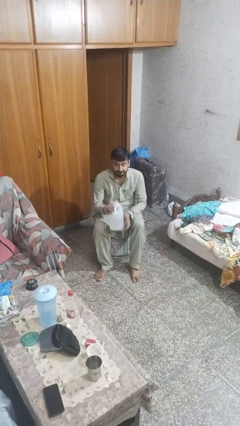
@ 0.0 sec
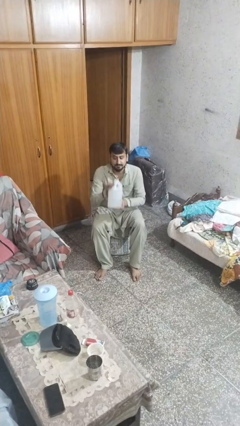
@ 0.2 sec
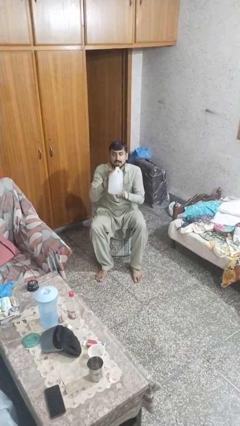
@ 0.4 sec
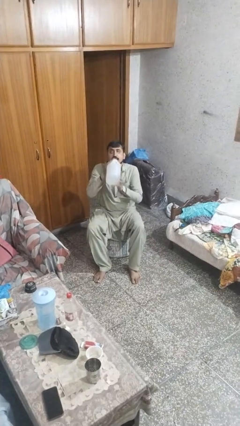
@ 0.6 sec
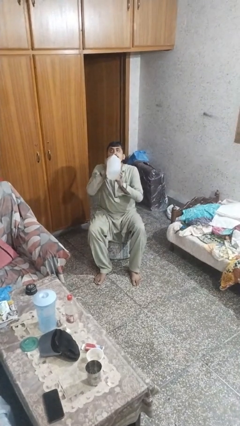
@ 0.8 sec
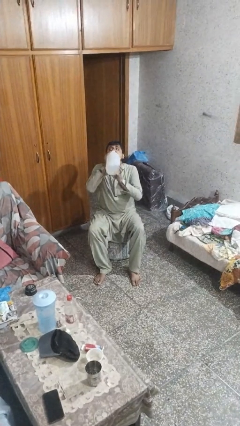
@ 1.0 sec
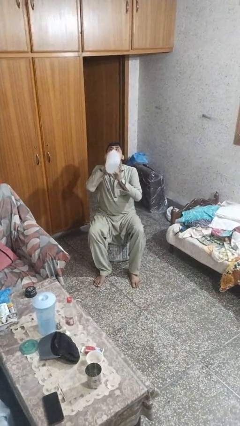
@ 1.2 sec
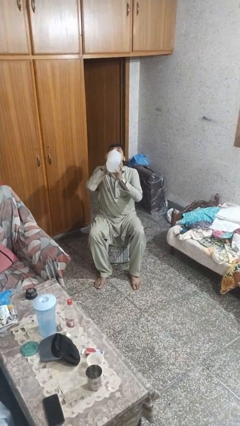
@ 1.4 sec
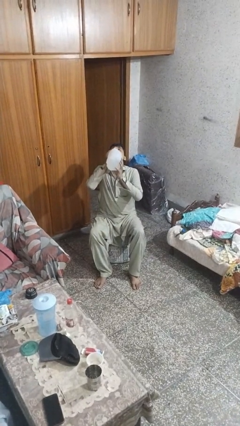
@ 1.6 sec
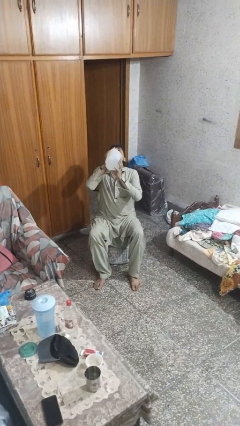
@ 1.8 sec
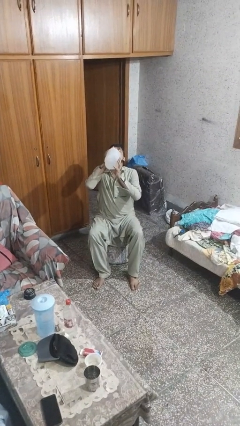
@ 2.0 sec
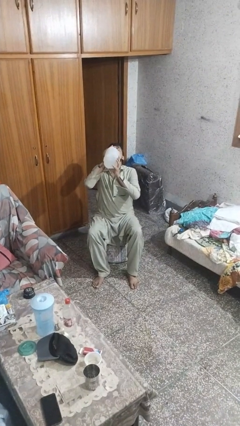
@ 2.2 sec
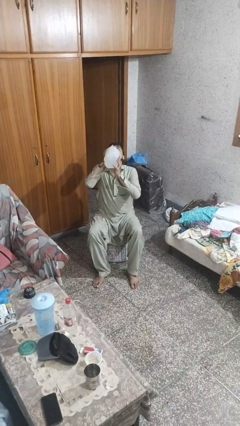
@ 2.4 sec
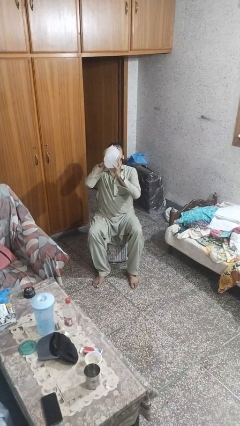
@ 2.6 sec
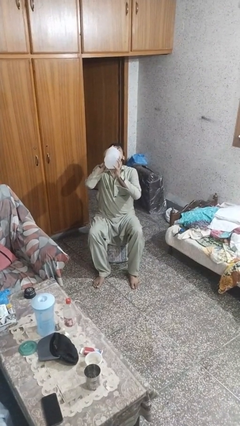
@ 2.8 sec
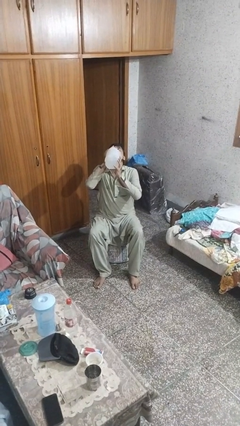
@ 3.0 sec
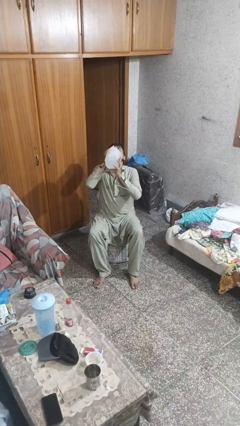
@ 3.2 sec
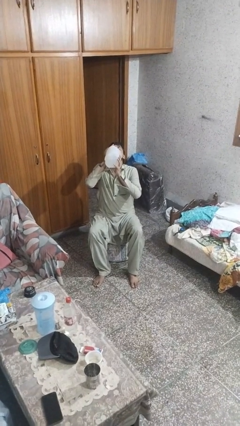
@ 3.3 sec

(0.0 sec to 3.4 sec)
person drinks from bottle

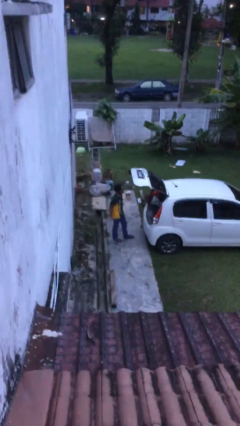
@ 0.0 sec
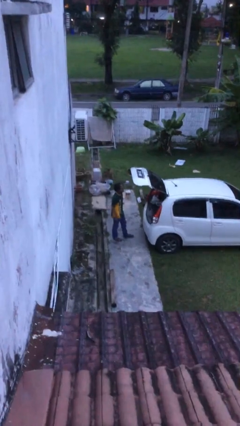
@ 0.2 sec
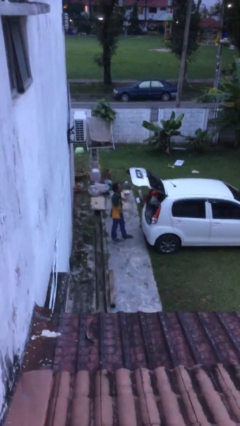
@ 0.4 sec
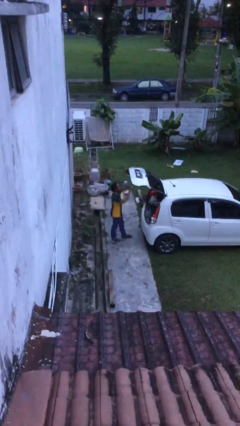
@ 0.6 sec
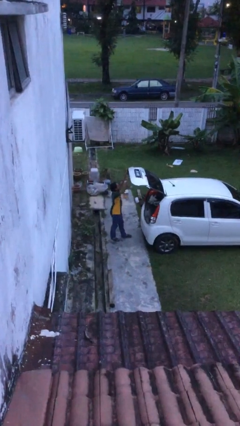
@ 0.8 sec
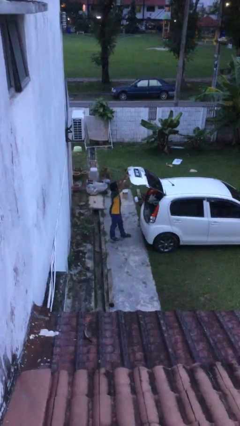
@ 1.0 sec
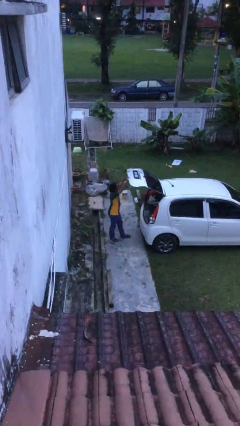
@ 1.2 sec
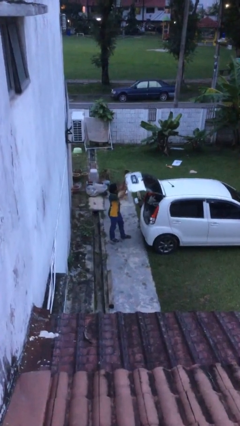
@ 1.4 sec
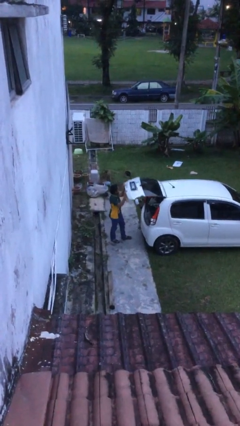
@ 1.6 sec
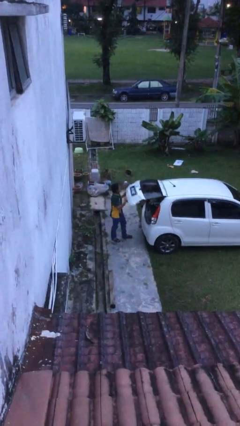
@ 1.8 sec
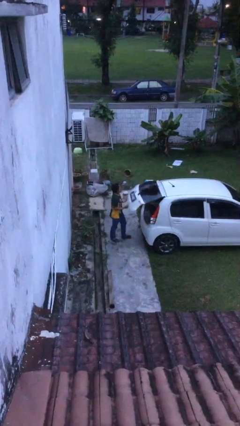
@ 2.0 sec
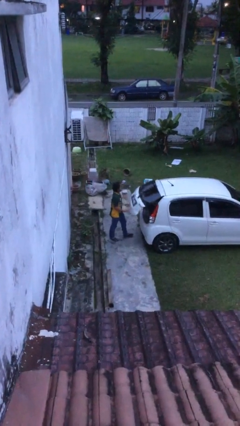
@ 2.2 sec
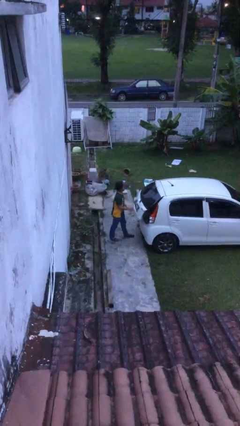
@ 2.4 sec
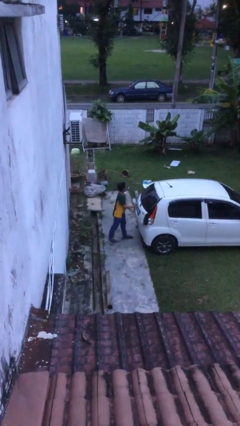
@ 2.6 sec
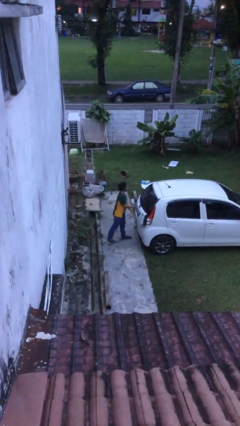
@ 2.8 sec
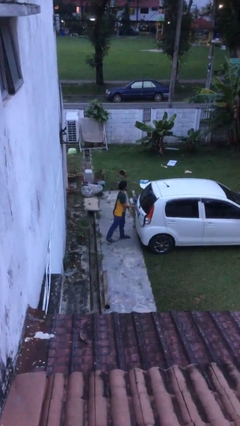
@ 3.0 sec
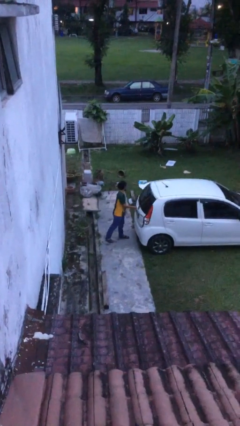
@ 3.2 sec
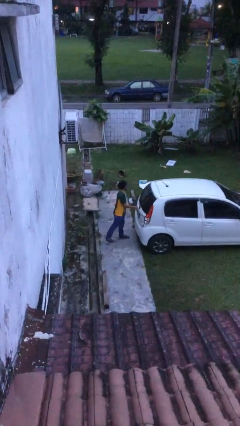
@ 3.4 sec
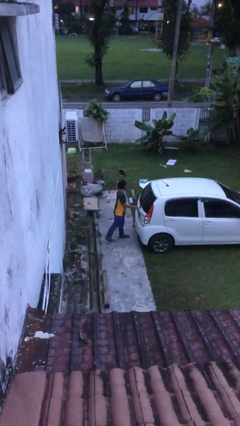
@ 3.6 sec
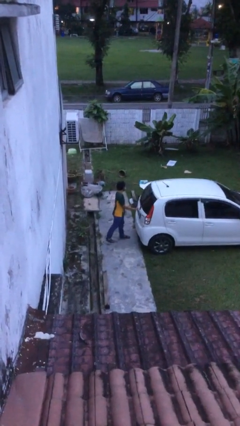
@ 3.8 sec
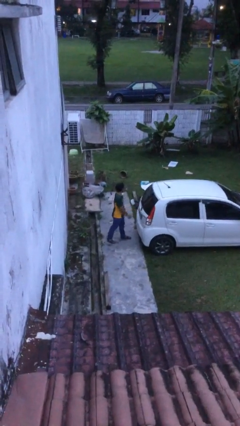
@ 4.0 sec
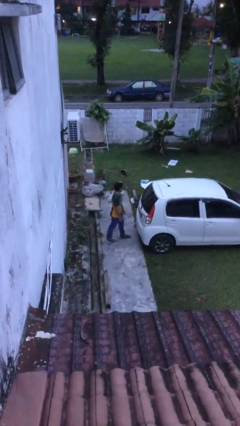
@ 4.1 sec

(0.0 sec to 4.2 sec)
person closes car trunk

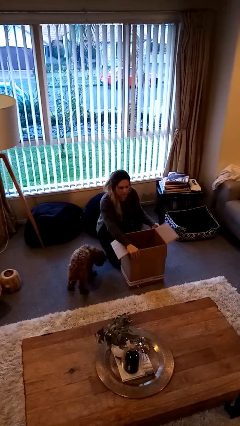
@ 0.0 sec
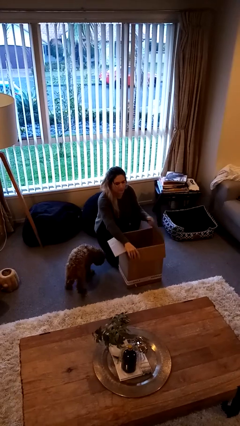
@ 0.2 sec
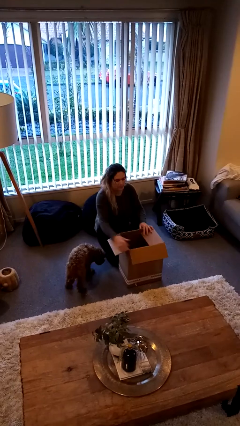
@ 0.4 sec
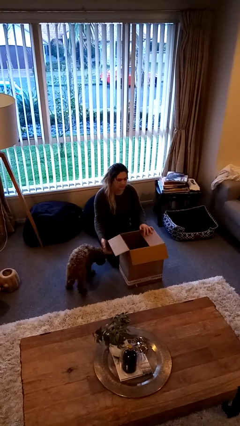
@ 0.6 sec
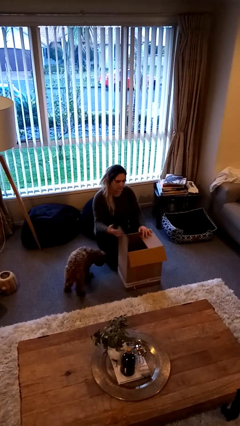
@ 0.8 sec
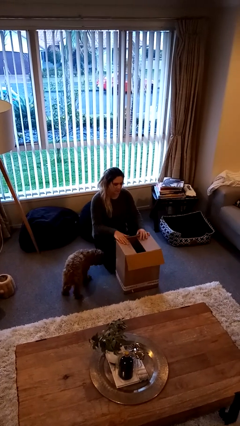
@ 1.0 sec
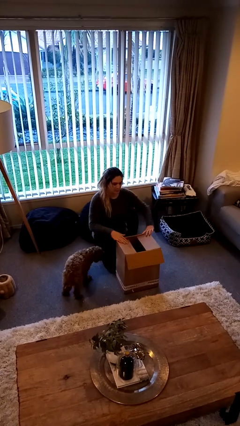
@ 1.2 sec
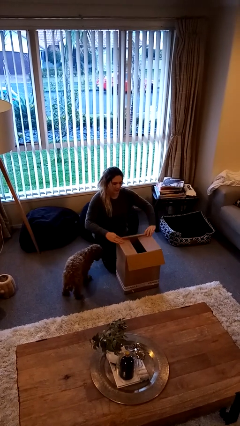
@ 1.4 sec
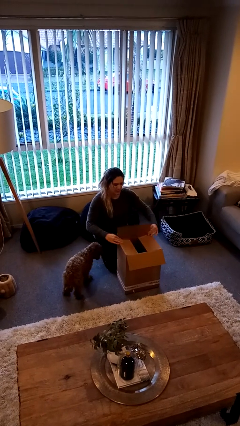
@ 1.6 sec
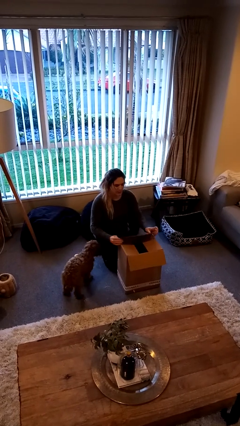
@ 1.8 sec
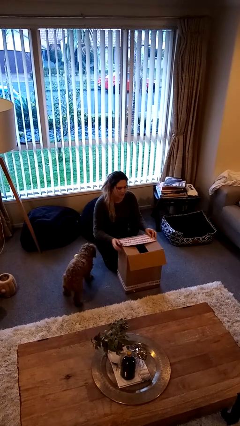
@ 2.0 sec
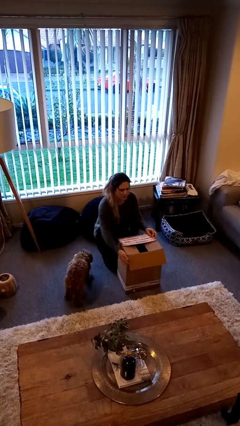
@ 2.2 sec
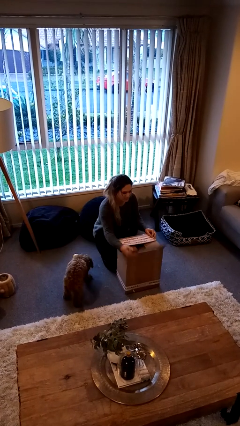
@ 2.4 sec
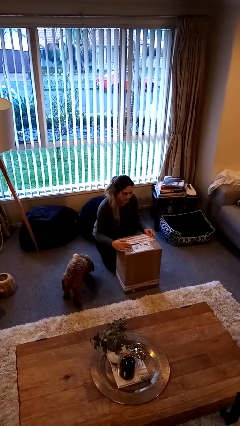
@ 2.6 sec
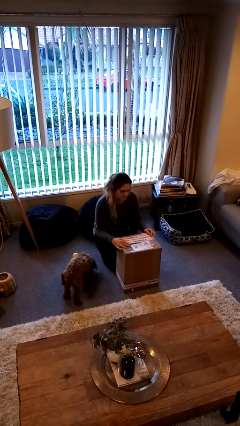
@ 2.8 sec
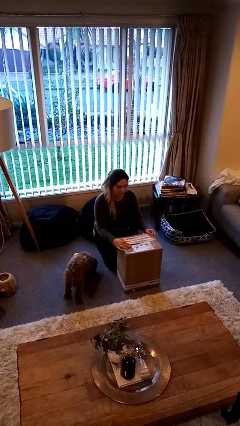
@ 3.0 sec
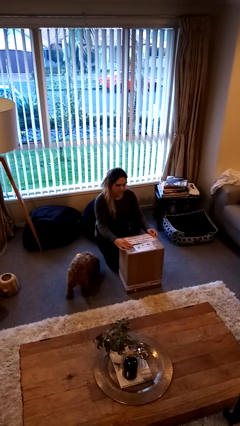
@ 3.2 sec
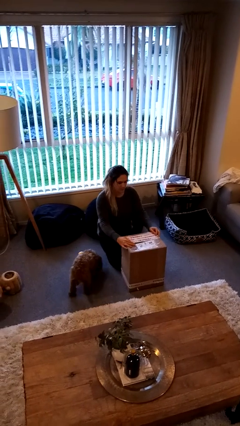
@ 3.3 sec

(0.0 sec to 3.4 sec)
person closes box

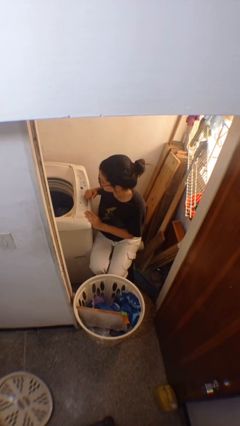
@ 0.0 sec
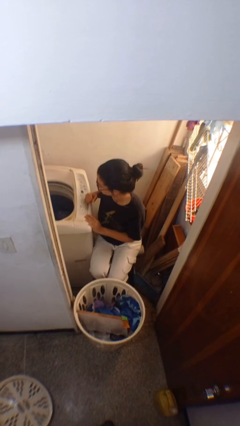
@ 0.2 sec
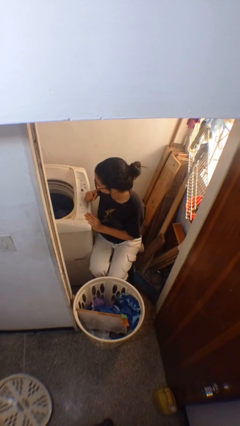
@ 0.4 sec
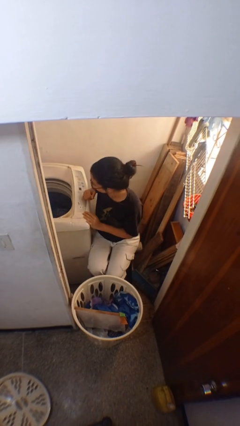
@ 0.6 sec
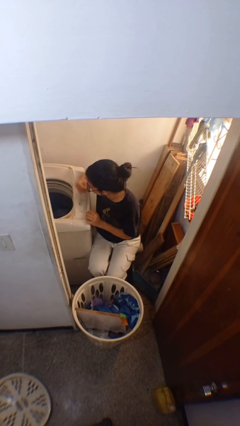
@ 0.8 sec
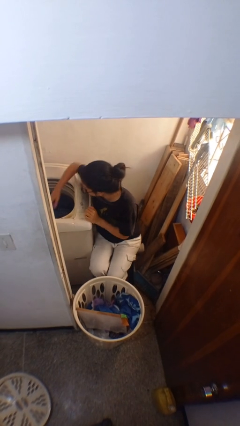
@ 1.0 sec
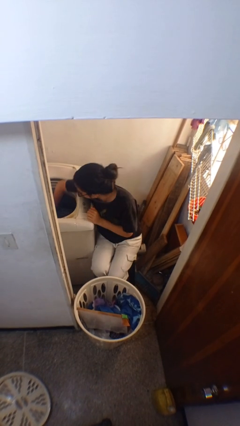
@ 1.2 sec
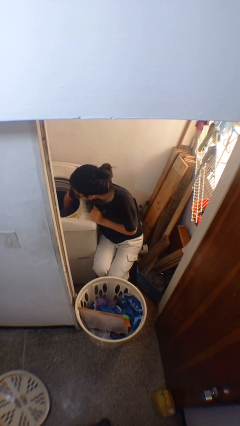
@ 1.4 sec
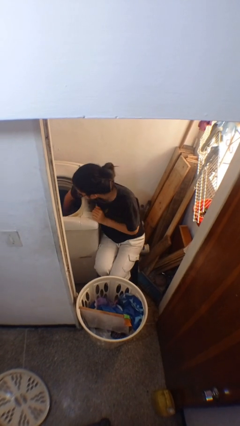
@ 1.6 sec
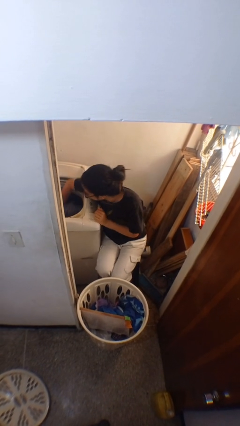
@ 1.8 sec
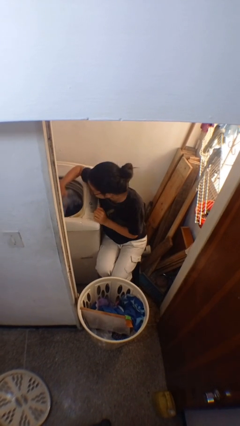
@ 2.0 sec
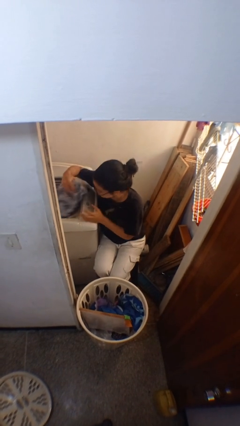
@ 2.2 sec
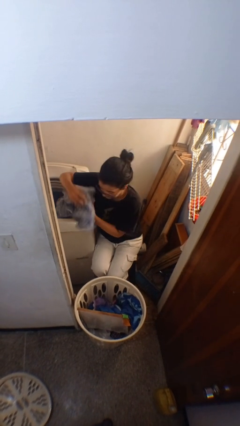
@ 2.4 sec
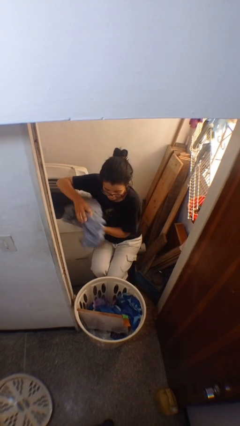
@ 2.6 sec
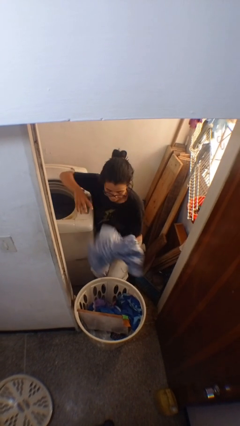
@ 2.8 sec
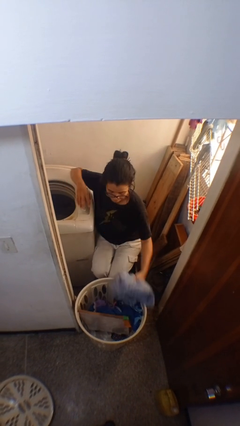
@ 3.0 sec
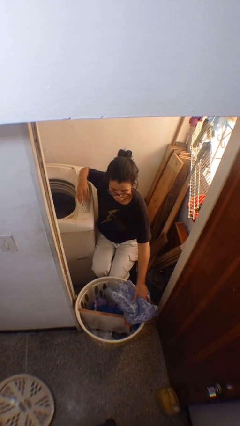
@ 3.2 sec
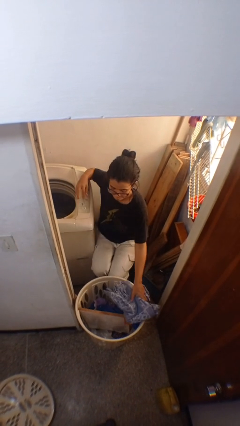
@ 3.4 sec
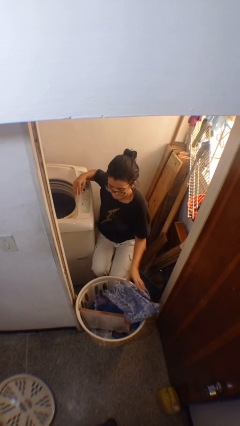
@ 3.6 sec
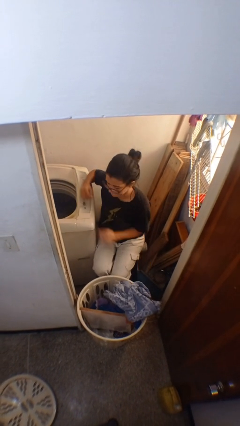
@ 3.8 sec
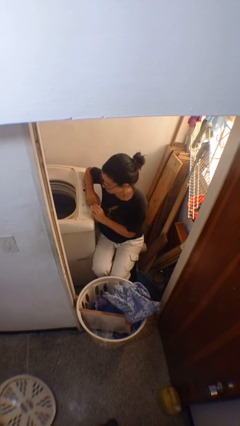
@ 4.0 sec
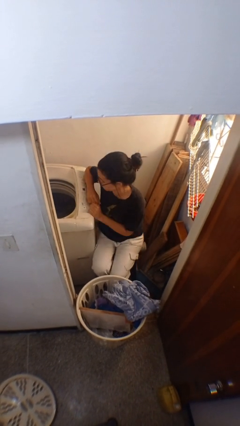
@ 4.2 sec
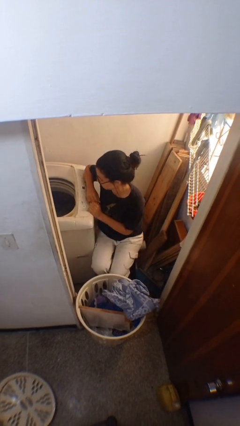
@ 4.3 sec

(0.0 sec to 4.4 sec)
person unloads clotheswasher

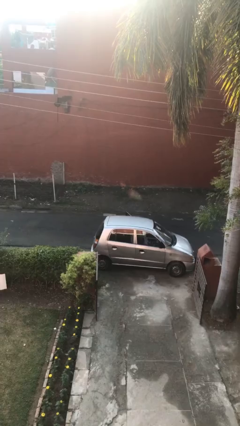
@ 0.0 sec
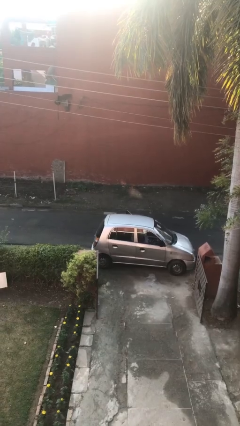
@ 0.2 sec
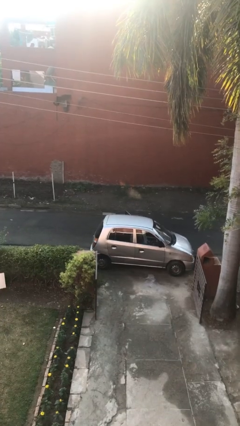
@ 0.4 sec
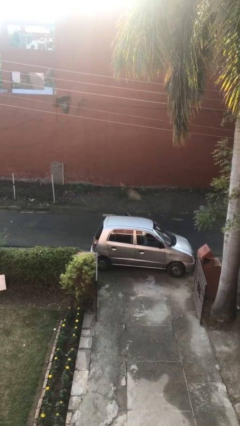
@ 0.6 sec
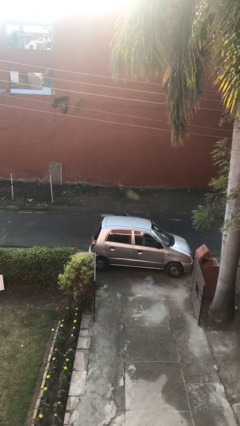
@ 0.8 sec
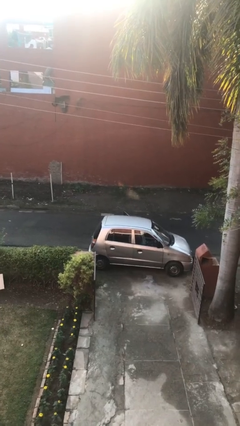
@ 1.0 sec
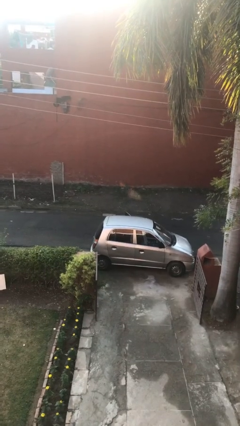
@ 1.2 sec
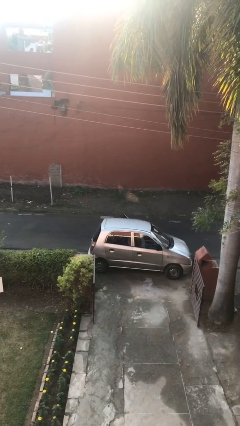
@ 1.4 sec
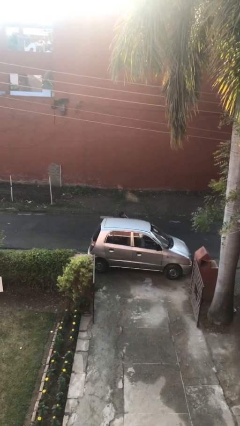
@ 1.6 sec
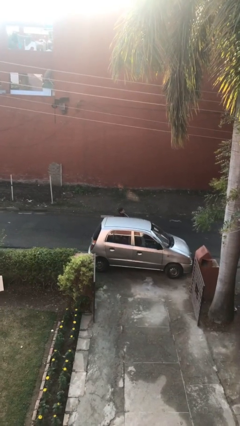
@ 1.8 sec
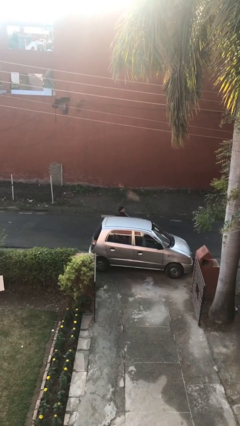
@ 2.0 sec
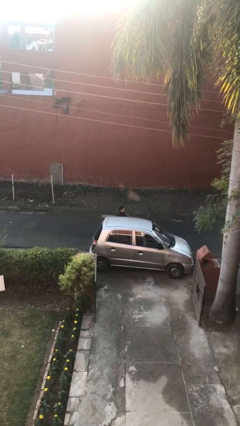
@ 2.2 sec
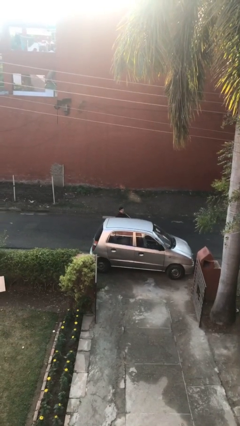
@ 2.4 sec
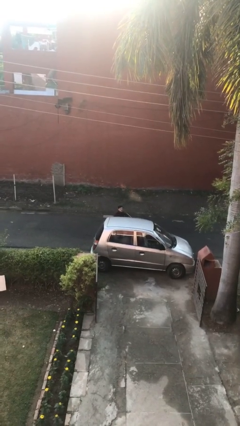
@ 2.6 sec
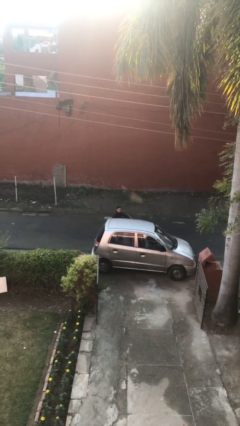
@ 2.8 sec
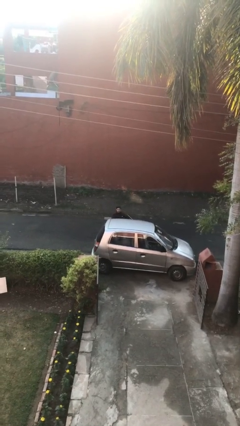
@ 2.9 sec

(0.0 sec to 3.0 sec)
person exits car
